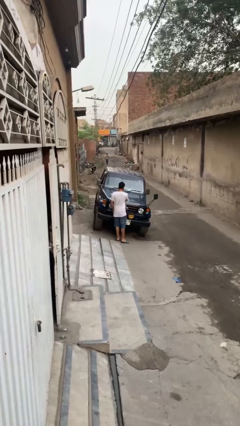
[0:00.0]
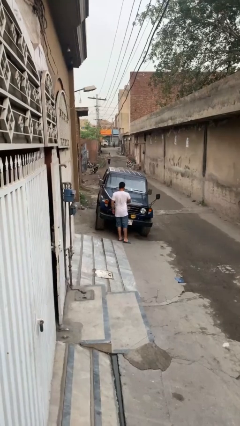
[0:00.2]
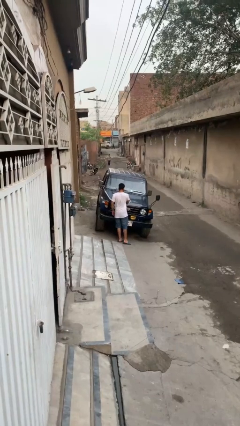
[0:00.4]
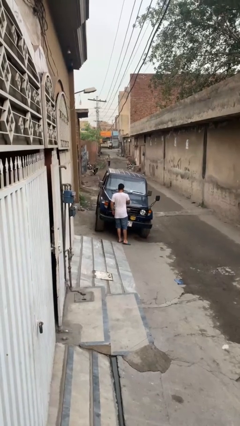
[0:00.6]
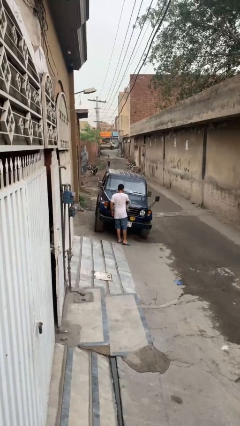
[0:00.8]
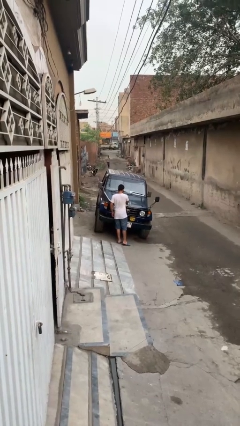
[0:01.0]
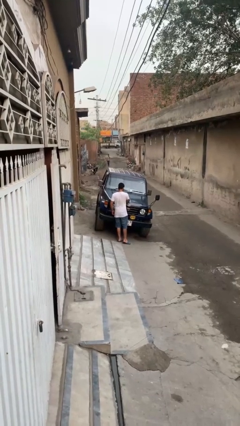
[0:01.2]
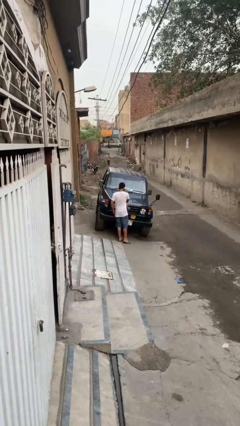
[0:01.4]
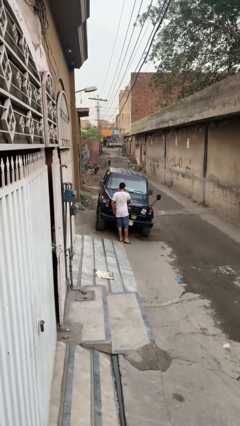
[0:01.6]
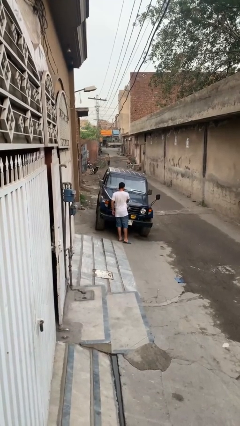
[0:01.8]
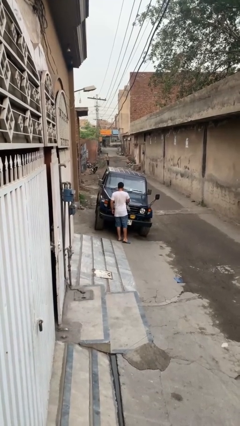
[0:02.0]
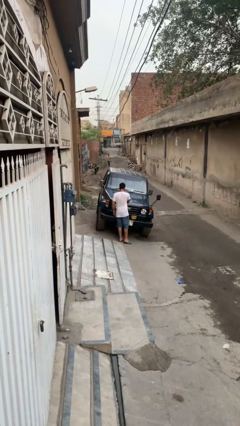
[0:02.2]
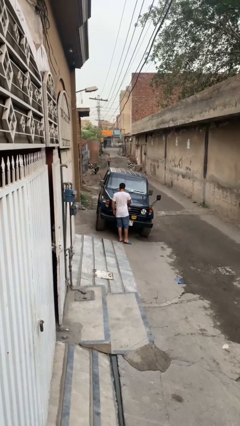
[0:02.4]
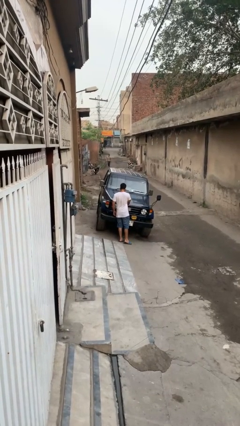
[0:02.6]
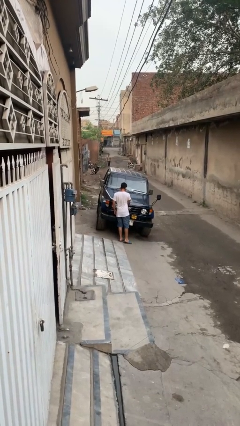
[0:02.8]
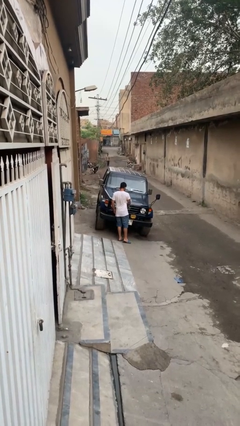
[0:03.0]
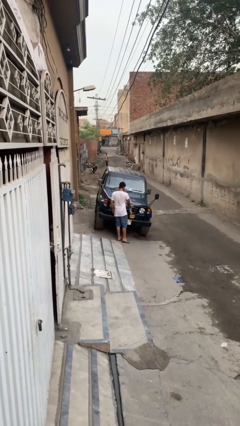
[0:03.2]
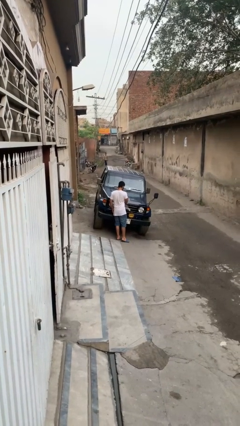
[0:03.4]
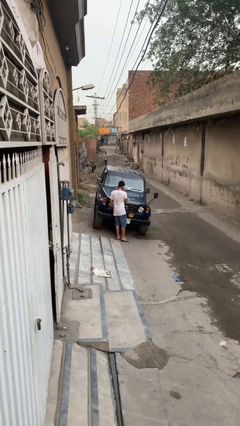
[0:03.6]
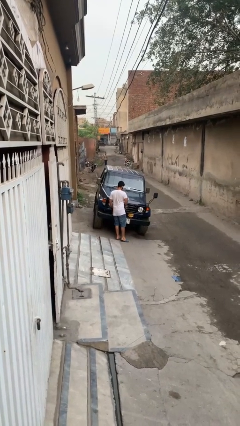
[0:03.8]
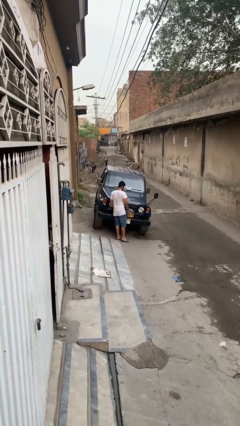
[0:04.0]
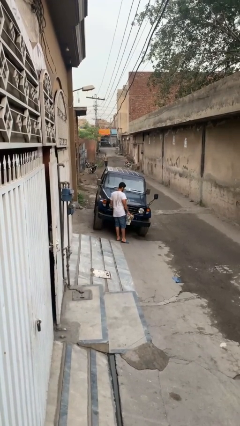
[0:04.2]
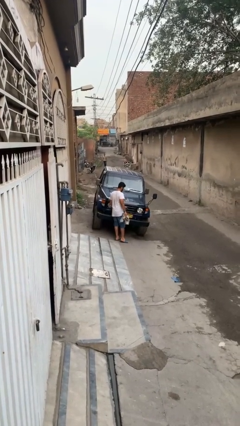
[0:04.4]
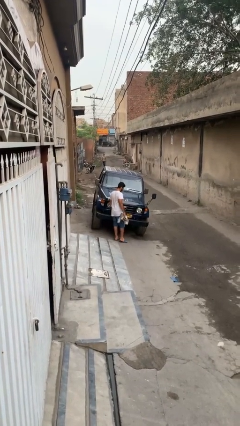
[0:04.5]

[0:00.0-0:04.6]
person polishes car with rag

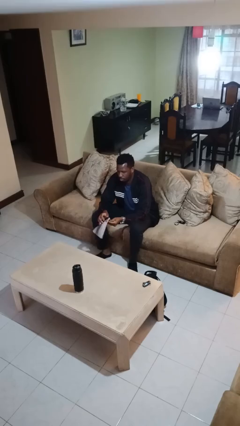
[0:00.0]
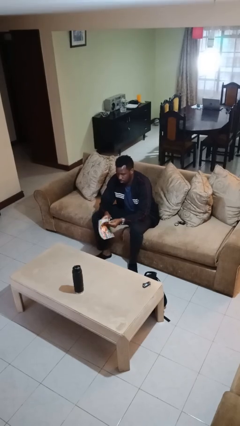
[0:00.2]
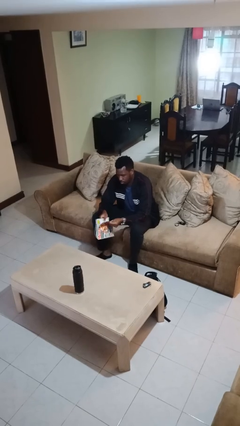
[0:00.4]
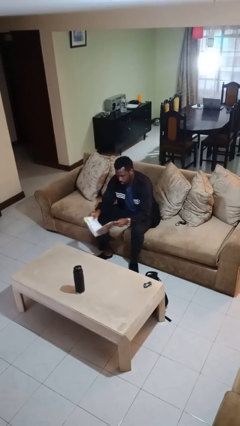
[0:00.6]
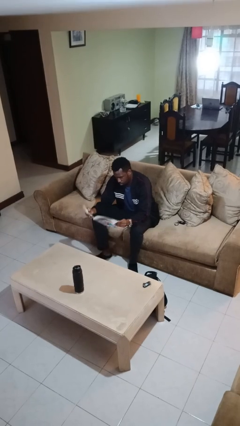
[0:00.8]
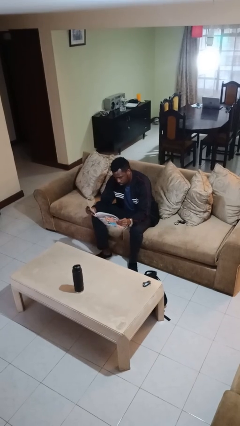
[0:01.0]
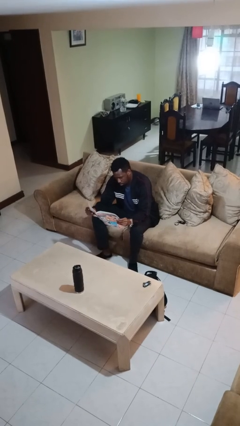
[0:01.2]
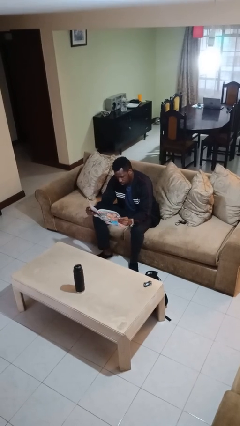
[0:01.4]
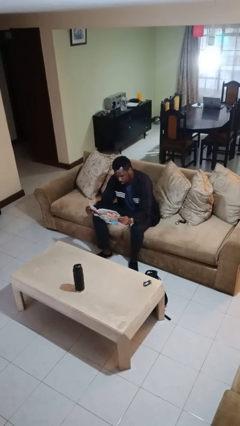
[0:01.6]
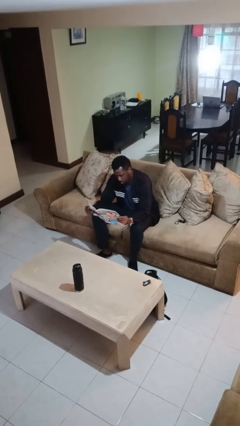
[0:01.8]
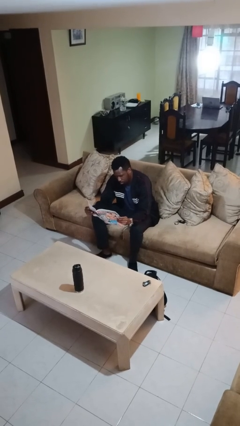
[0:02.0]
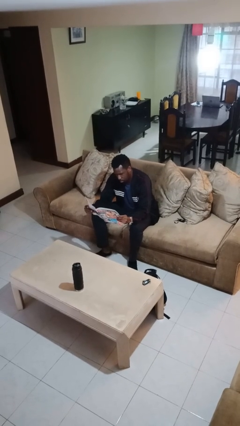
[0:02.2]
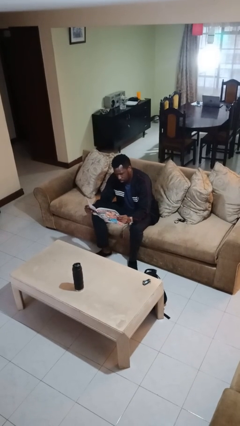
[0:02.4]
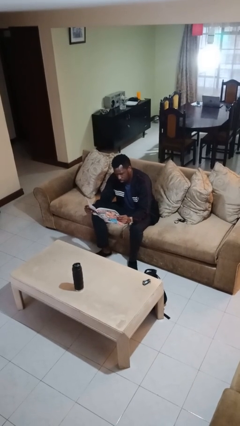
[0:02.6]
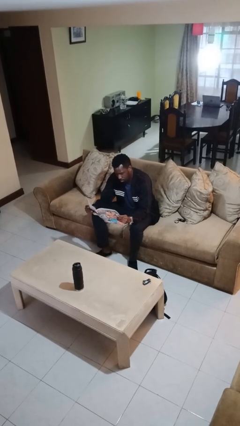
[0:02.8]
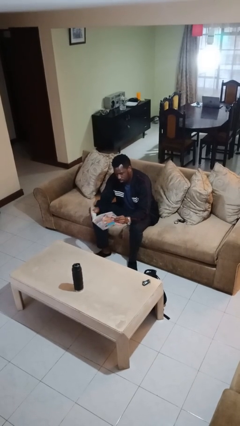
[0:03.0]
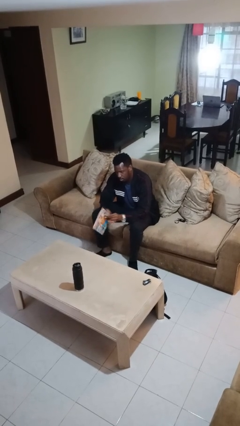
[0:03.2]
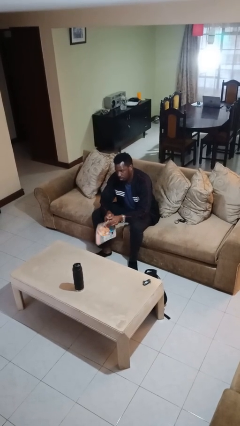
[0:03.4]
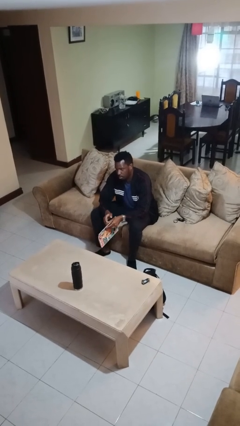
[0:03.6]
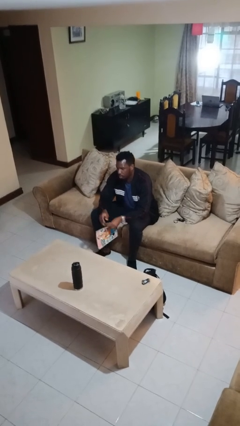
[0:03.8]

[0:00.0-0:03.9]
person reads magazine

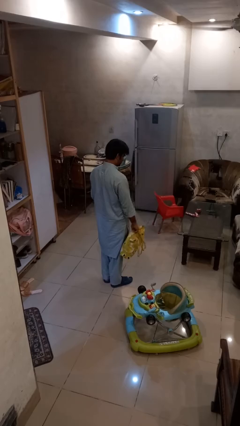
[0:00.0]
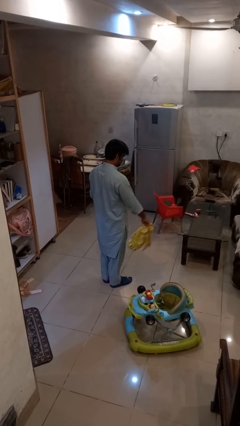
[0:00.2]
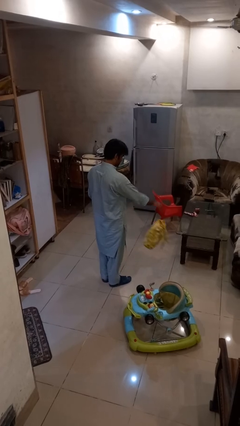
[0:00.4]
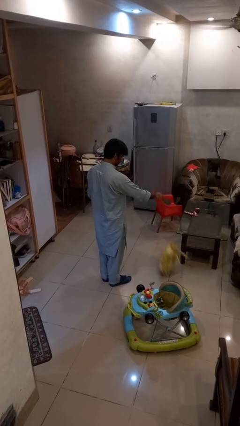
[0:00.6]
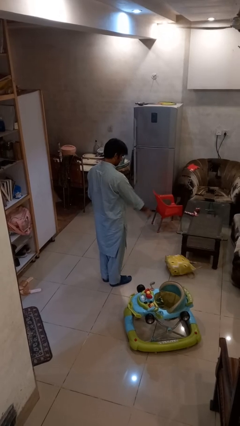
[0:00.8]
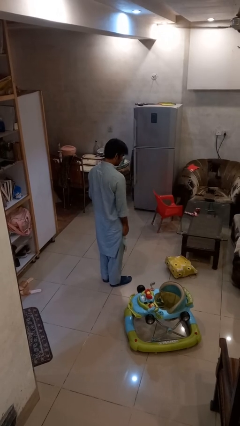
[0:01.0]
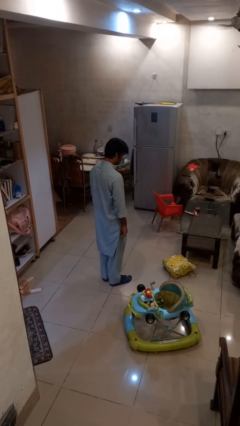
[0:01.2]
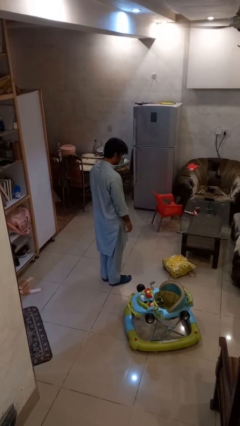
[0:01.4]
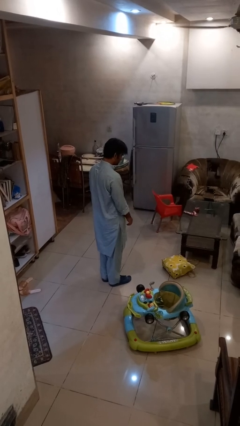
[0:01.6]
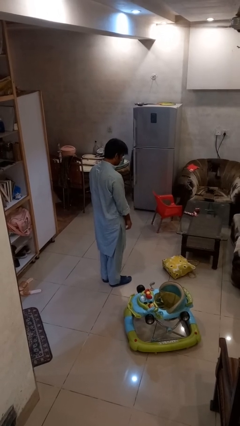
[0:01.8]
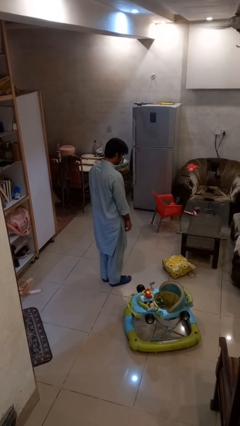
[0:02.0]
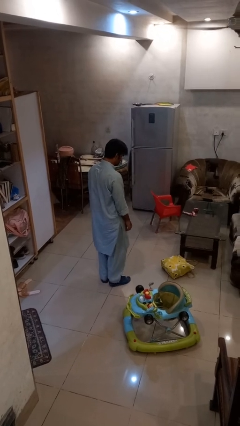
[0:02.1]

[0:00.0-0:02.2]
person throws object to ground

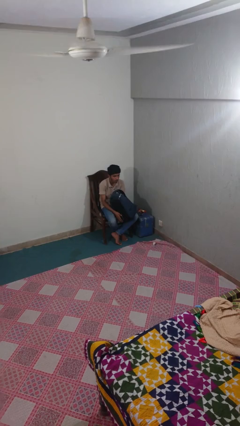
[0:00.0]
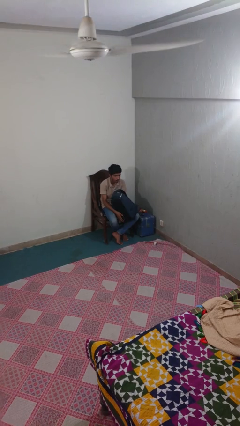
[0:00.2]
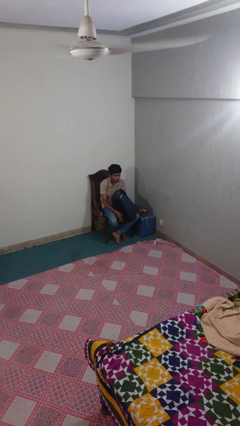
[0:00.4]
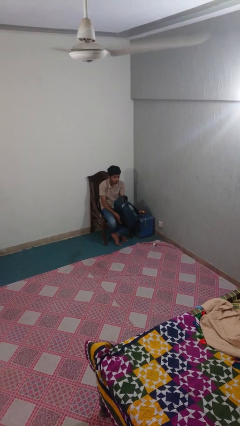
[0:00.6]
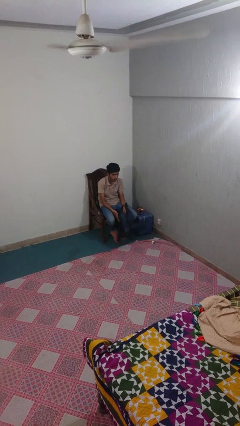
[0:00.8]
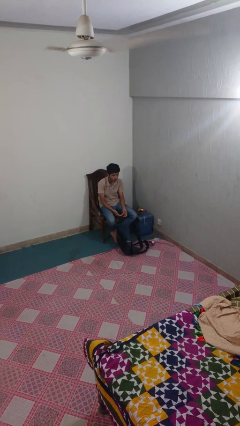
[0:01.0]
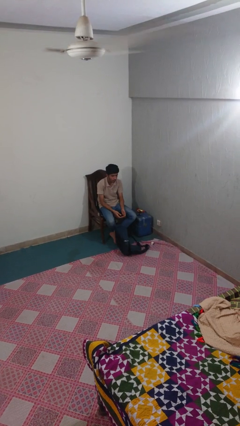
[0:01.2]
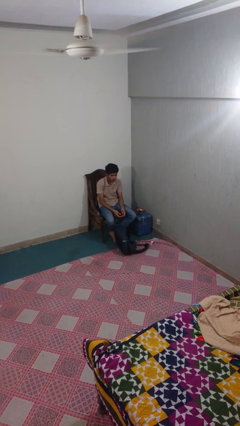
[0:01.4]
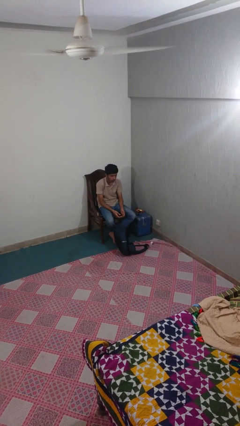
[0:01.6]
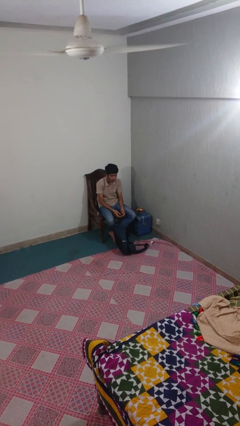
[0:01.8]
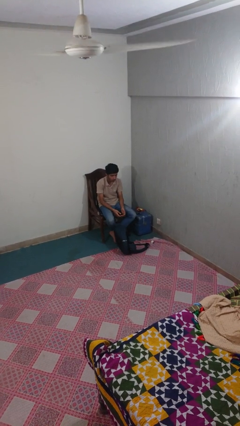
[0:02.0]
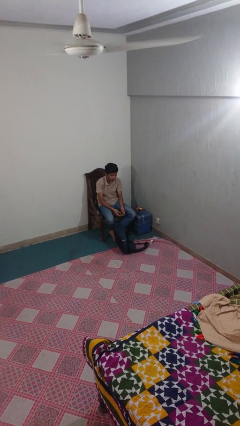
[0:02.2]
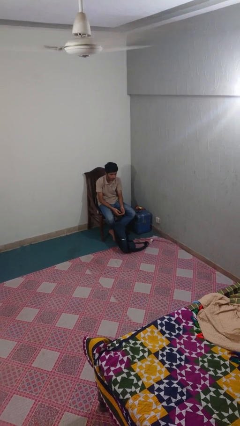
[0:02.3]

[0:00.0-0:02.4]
person drops object

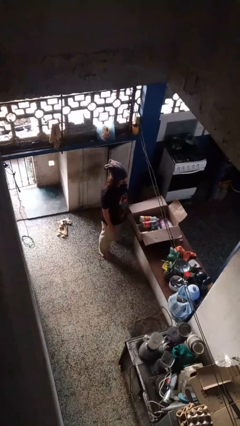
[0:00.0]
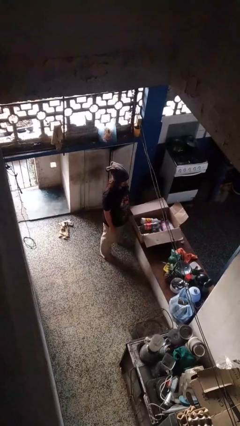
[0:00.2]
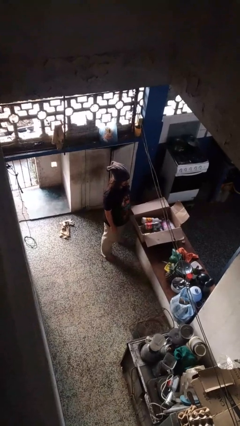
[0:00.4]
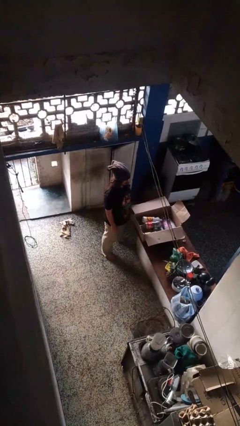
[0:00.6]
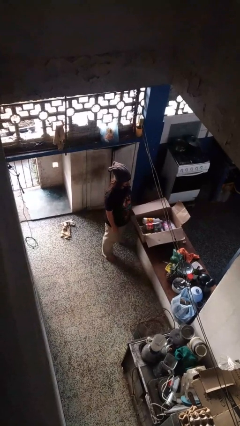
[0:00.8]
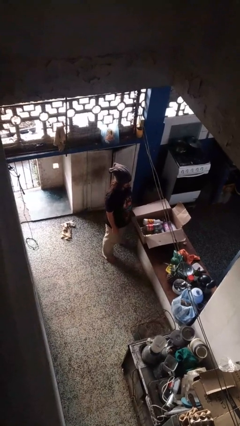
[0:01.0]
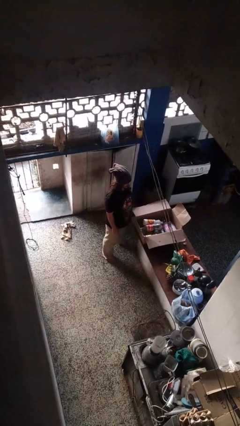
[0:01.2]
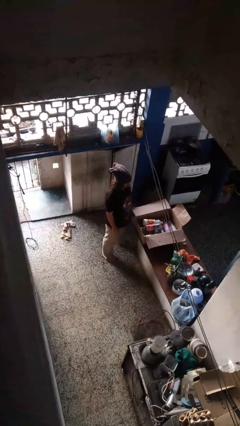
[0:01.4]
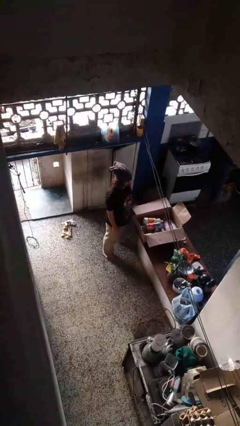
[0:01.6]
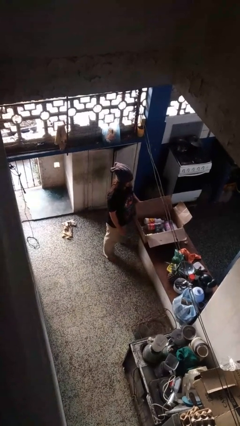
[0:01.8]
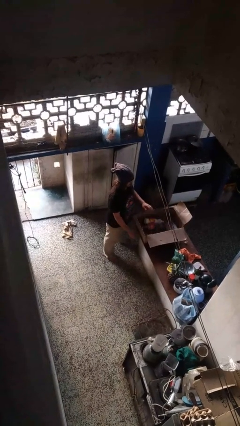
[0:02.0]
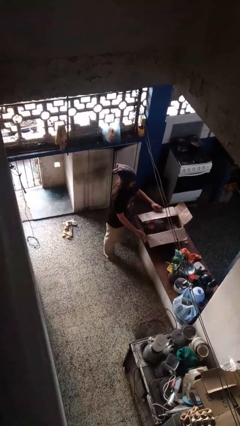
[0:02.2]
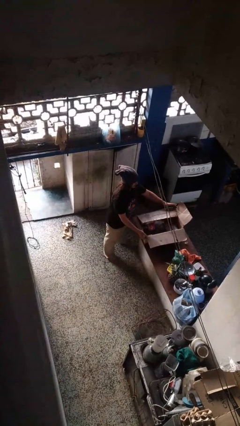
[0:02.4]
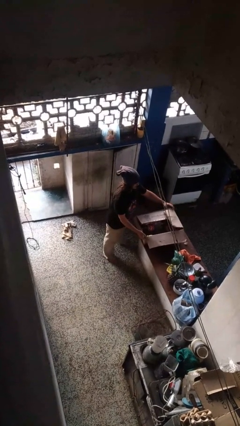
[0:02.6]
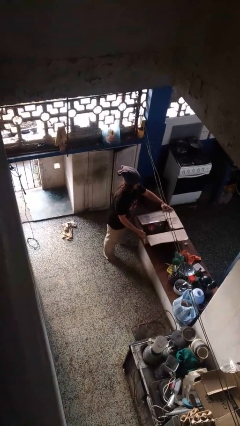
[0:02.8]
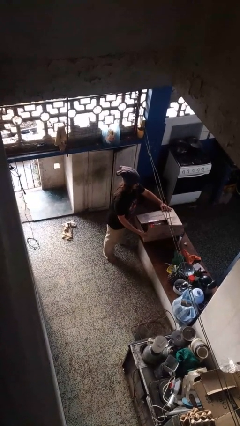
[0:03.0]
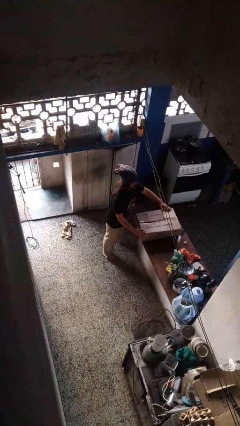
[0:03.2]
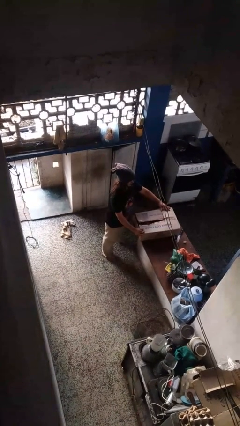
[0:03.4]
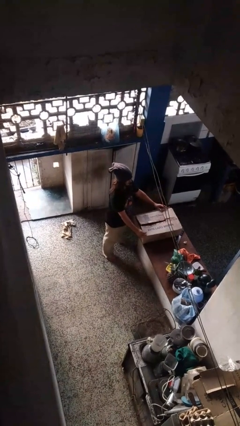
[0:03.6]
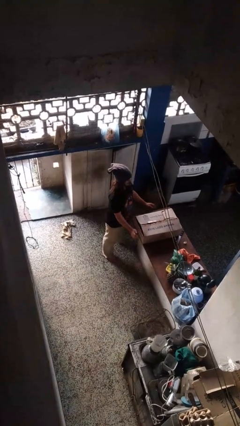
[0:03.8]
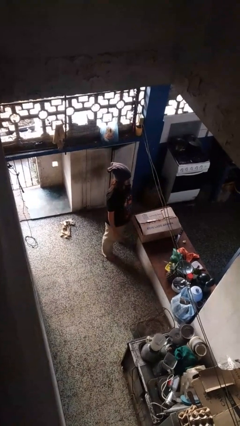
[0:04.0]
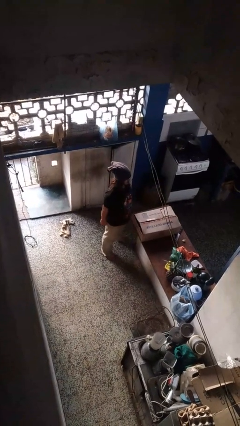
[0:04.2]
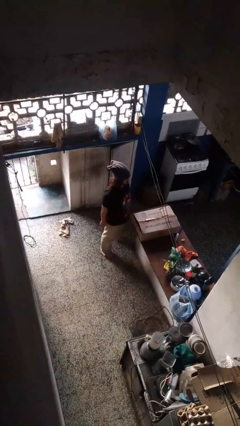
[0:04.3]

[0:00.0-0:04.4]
person closes box
